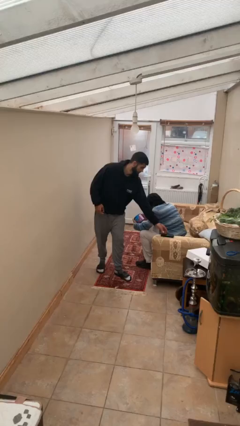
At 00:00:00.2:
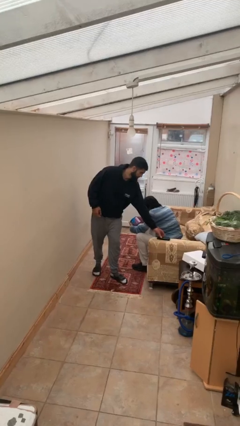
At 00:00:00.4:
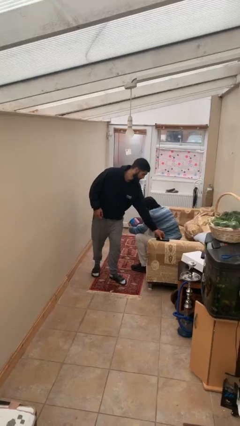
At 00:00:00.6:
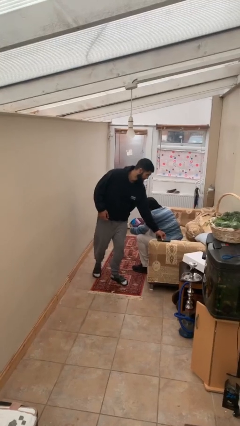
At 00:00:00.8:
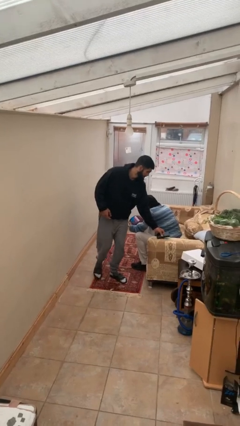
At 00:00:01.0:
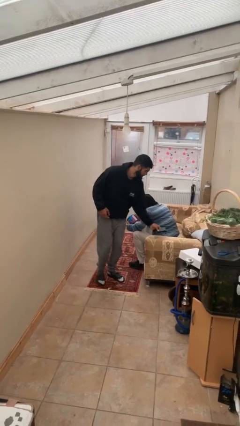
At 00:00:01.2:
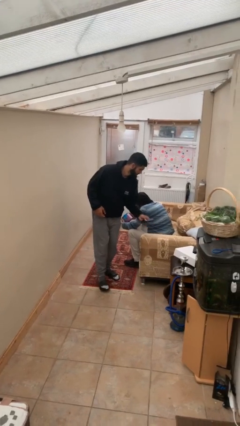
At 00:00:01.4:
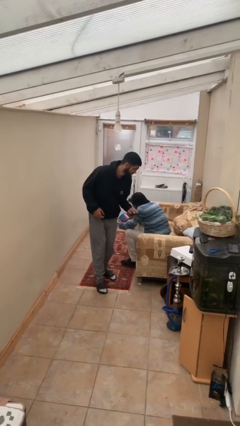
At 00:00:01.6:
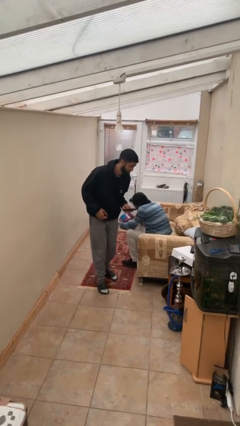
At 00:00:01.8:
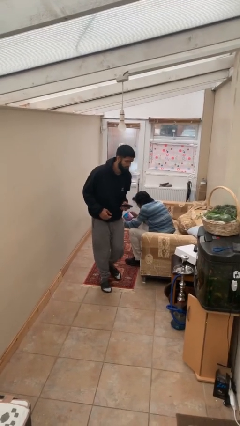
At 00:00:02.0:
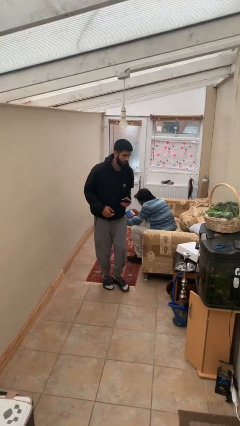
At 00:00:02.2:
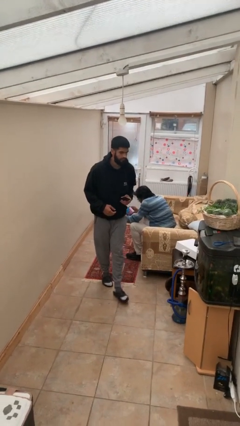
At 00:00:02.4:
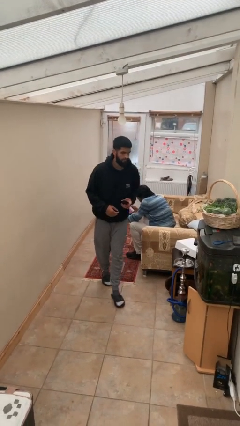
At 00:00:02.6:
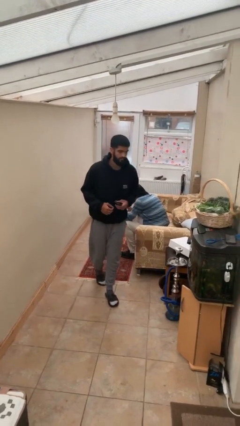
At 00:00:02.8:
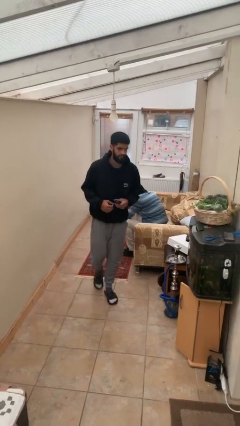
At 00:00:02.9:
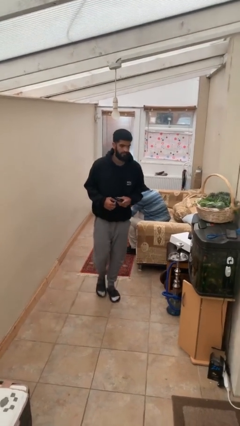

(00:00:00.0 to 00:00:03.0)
person steals object from person

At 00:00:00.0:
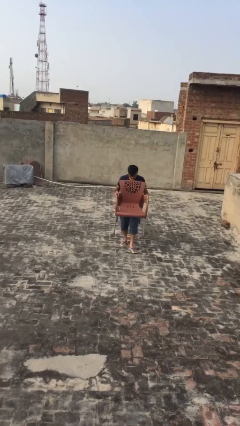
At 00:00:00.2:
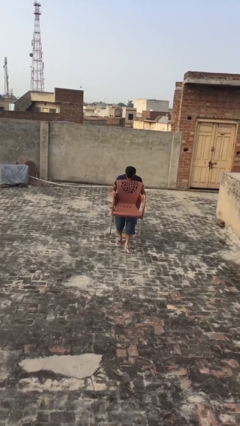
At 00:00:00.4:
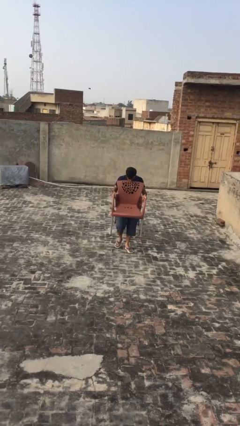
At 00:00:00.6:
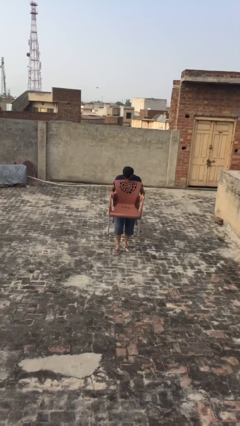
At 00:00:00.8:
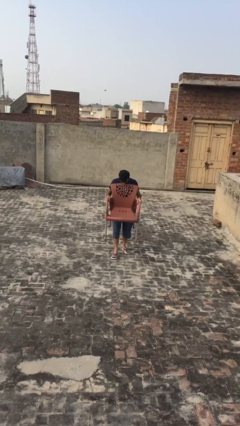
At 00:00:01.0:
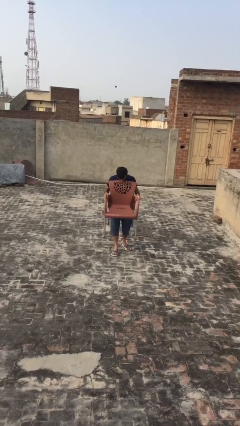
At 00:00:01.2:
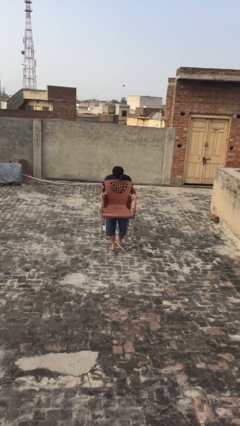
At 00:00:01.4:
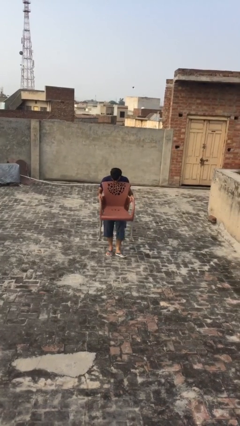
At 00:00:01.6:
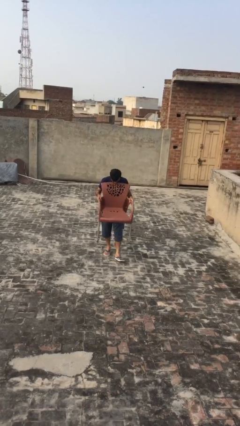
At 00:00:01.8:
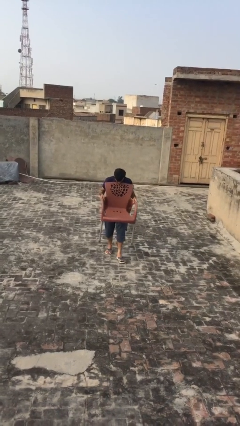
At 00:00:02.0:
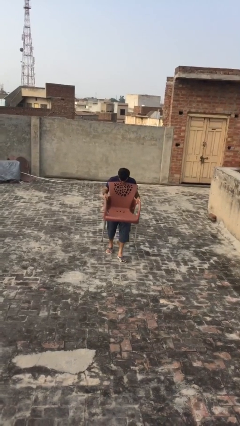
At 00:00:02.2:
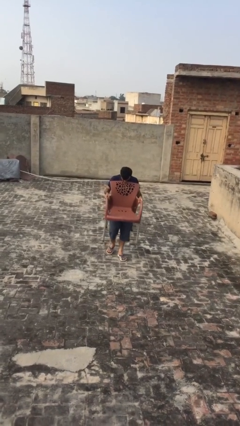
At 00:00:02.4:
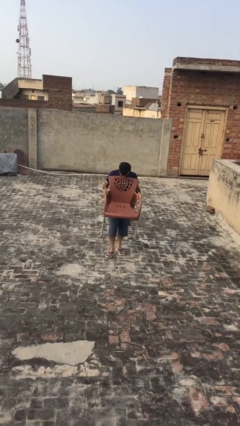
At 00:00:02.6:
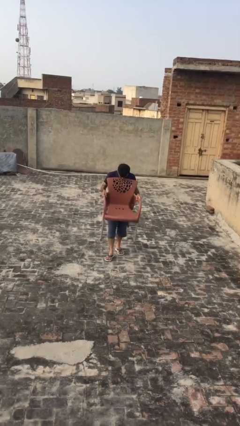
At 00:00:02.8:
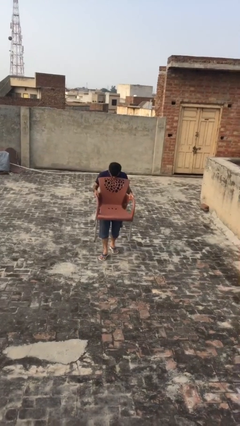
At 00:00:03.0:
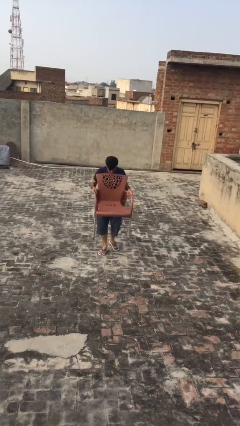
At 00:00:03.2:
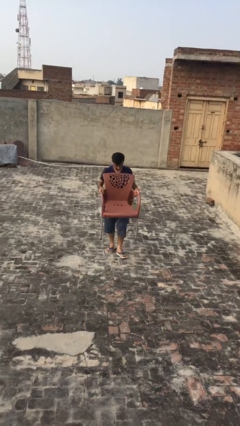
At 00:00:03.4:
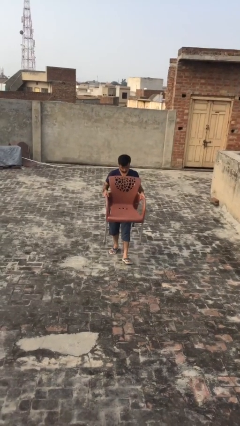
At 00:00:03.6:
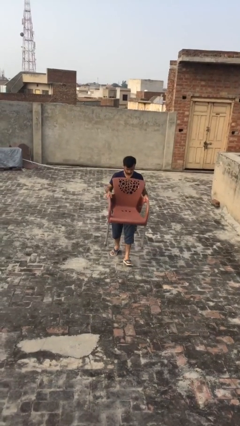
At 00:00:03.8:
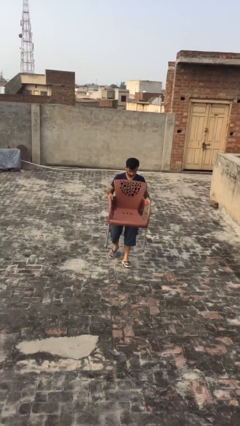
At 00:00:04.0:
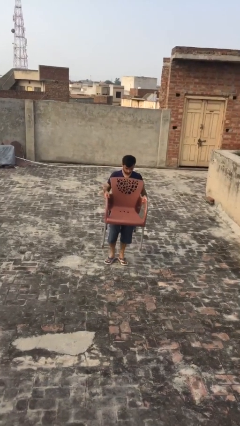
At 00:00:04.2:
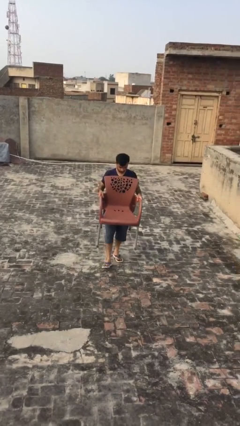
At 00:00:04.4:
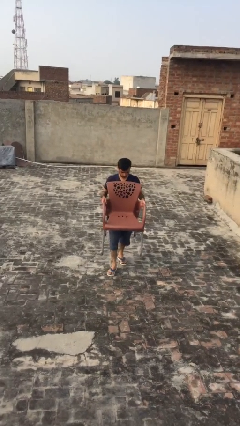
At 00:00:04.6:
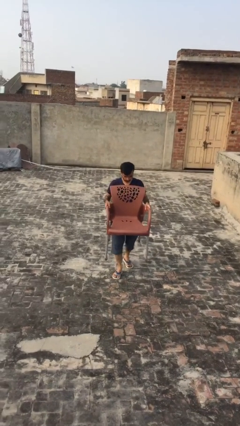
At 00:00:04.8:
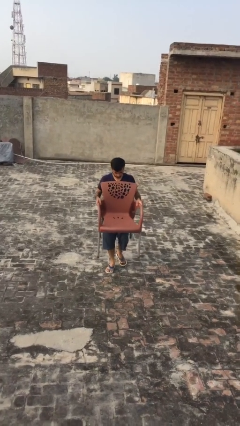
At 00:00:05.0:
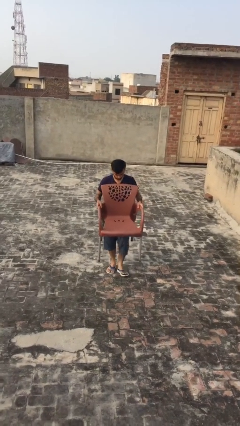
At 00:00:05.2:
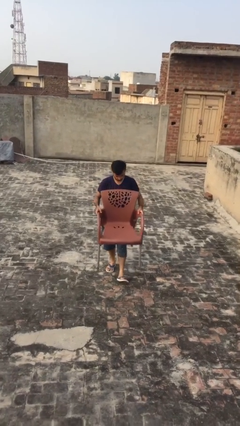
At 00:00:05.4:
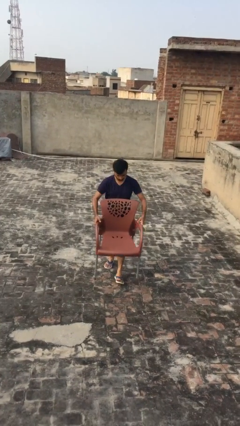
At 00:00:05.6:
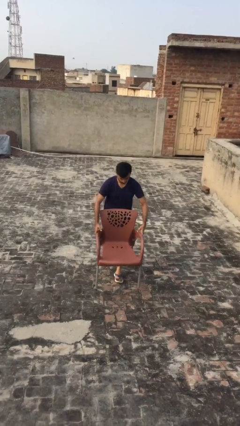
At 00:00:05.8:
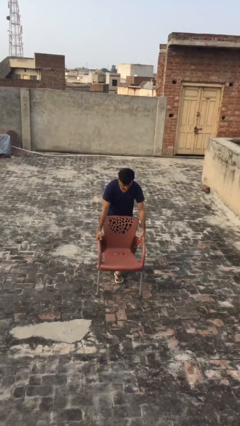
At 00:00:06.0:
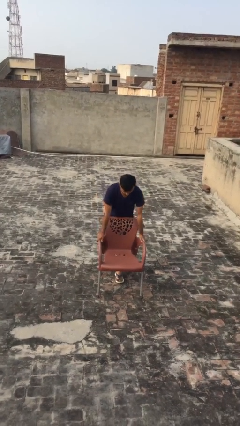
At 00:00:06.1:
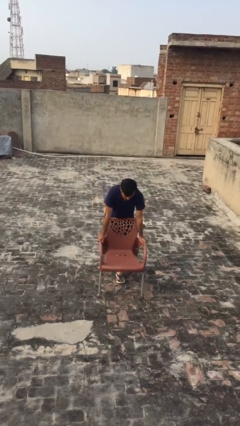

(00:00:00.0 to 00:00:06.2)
person carries heavy object

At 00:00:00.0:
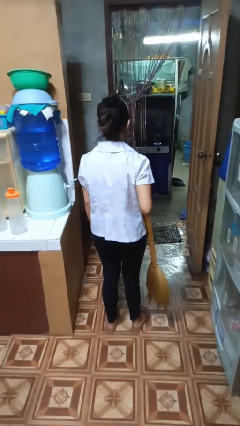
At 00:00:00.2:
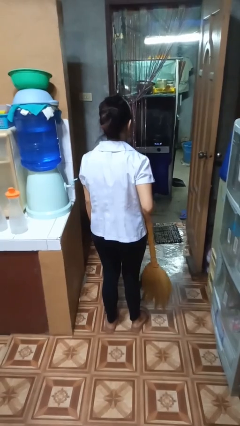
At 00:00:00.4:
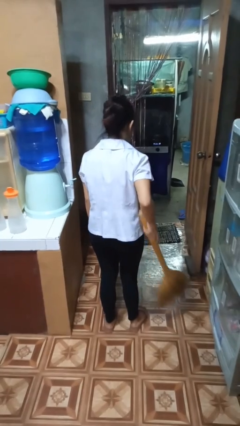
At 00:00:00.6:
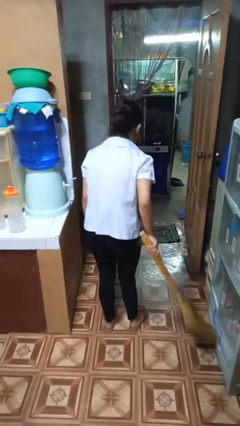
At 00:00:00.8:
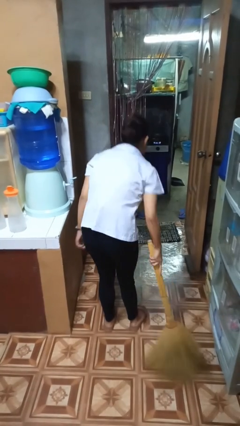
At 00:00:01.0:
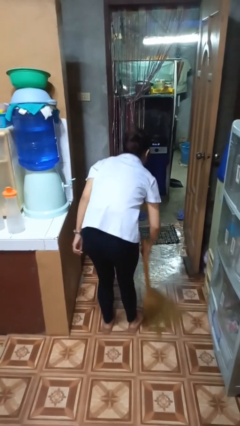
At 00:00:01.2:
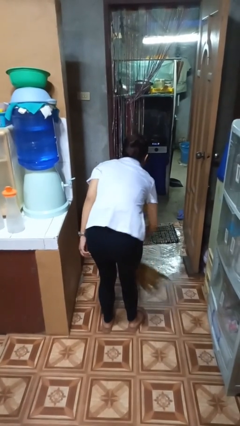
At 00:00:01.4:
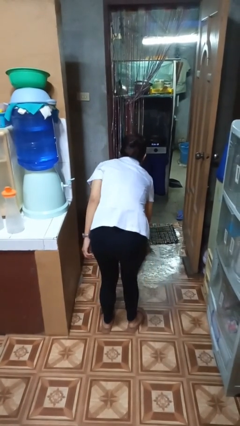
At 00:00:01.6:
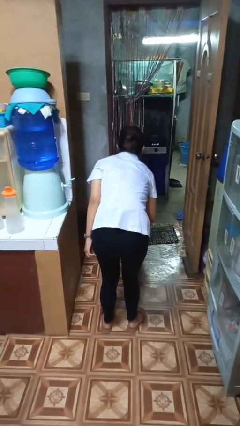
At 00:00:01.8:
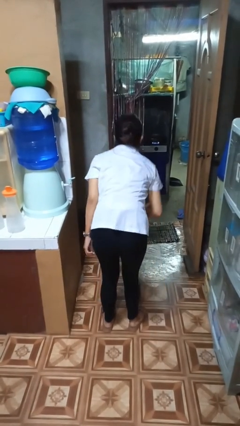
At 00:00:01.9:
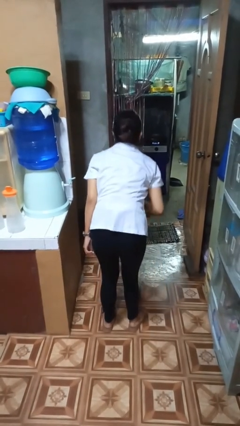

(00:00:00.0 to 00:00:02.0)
person sweeps floor

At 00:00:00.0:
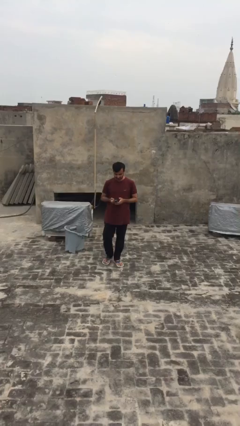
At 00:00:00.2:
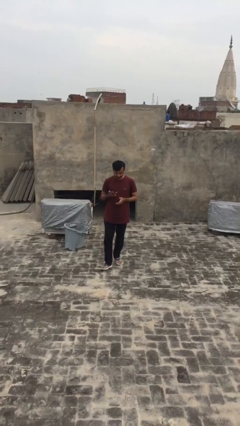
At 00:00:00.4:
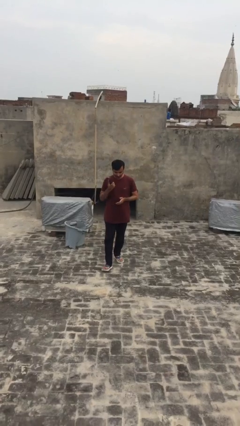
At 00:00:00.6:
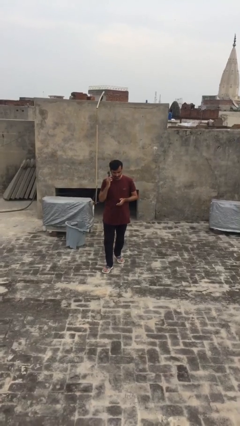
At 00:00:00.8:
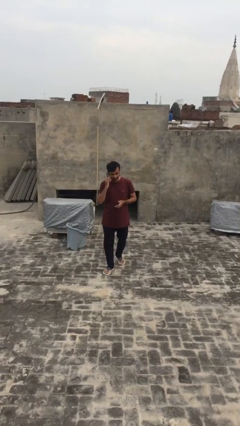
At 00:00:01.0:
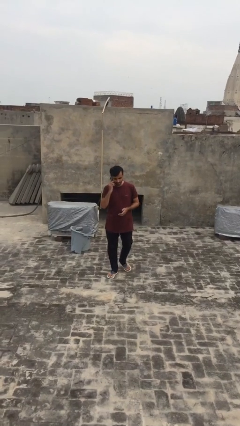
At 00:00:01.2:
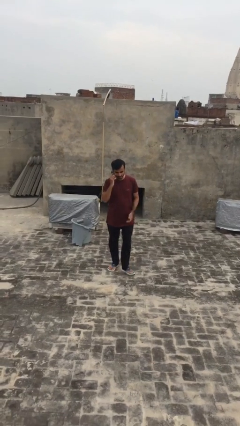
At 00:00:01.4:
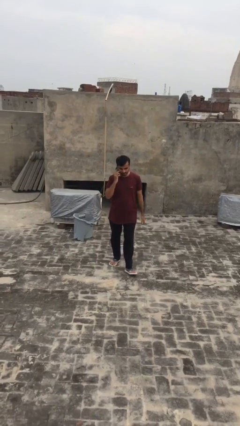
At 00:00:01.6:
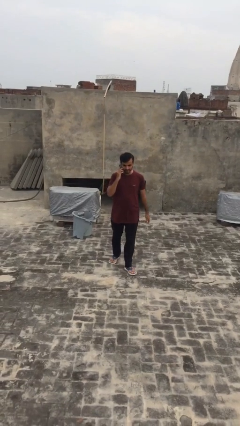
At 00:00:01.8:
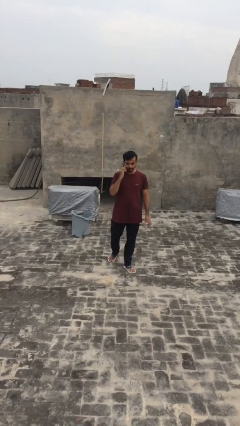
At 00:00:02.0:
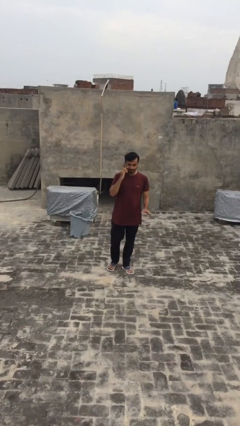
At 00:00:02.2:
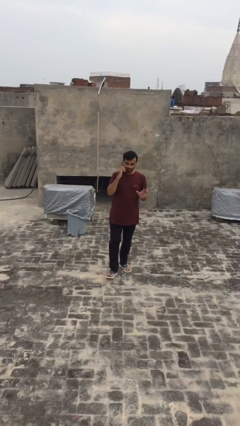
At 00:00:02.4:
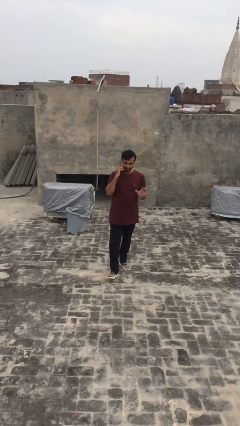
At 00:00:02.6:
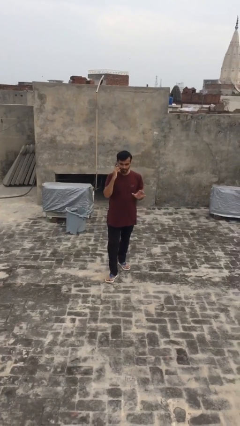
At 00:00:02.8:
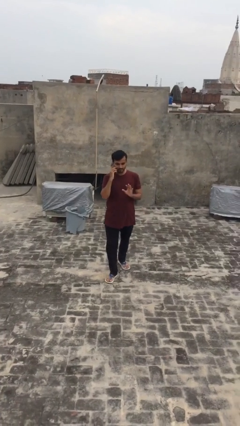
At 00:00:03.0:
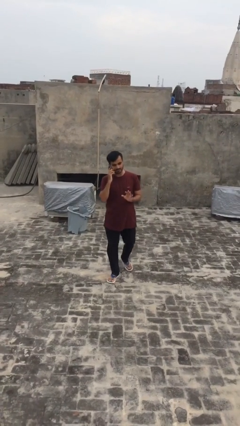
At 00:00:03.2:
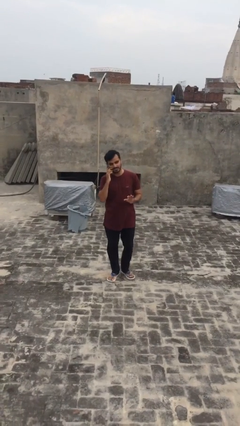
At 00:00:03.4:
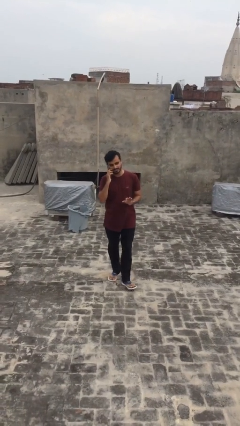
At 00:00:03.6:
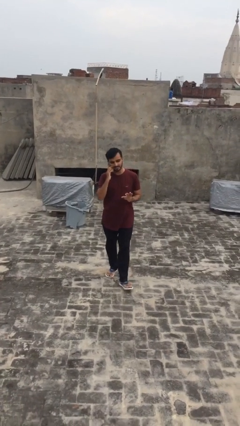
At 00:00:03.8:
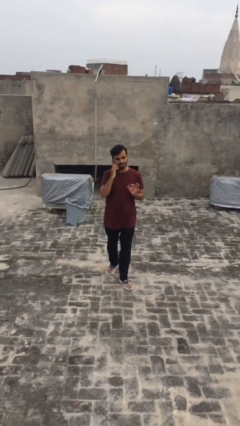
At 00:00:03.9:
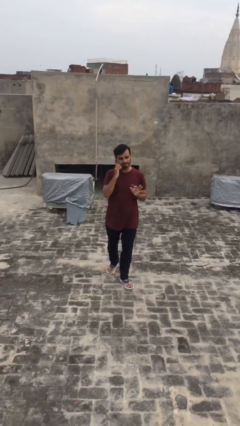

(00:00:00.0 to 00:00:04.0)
person talks on phone

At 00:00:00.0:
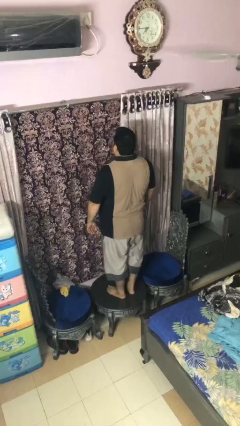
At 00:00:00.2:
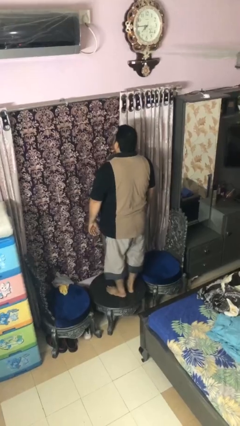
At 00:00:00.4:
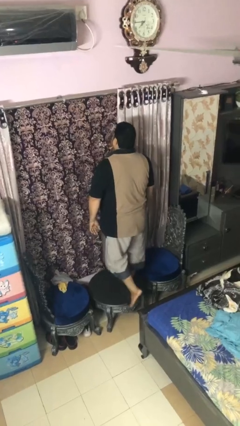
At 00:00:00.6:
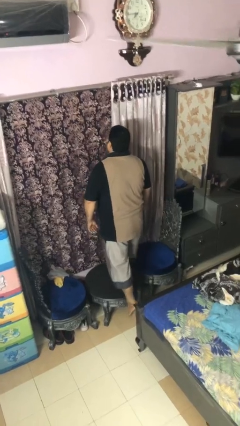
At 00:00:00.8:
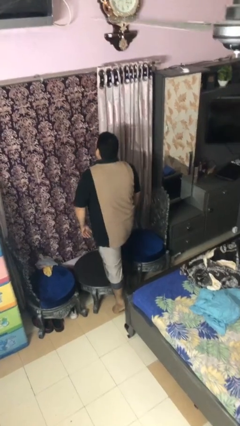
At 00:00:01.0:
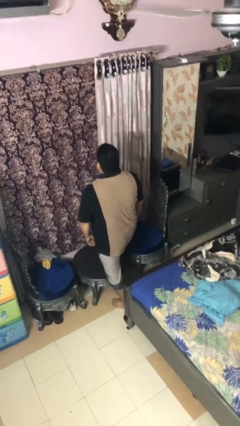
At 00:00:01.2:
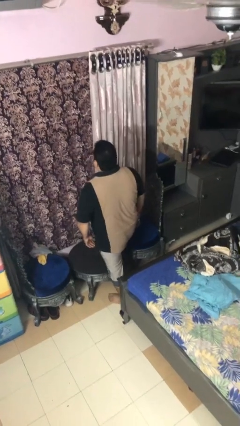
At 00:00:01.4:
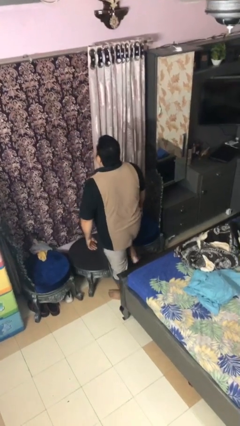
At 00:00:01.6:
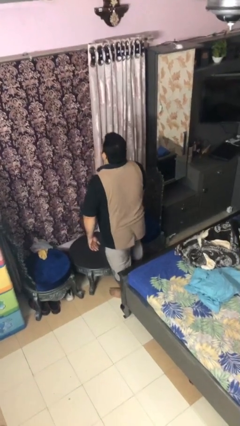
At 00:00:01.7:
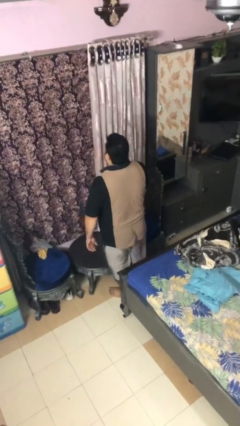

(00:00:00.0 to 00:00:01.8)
person climbs off table

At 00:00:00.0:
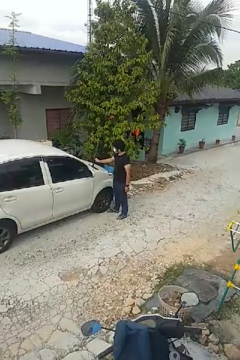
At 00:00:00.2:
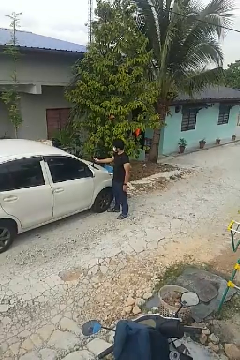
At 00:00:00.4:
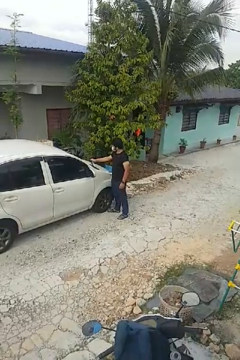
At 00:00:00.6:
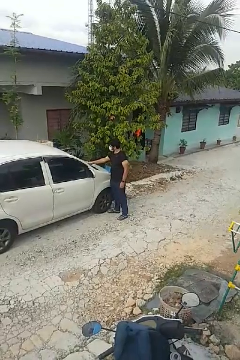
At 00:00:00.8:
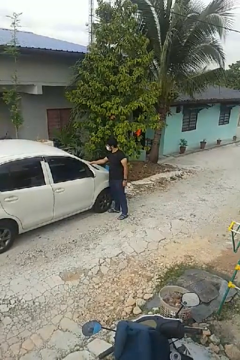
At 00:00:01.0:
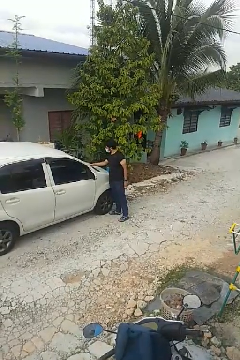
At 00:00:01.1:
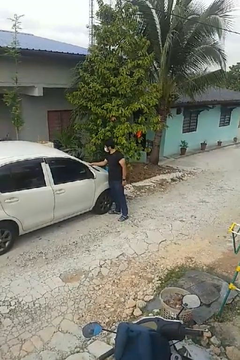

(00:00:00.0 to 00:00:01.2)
person flips down car wipers
